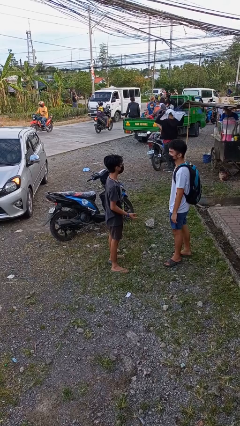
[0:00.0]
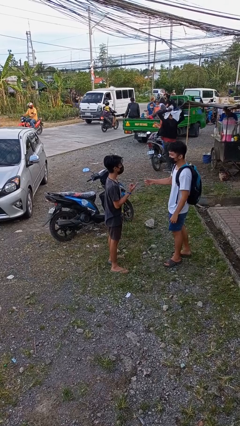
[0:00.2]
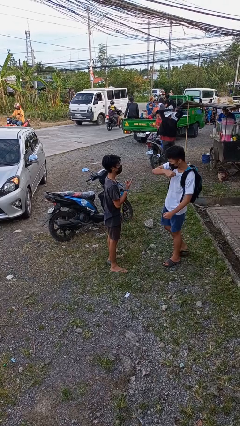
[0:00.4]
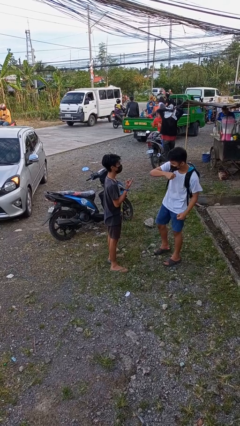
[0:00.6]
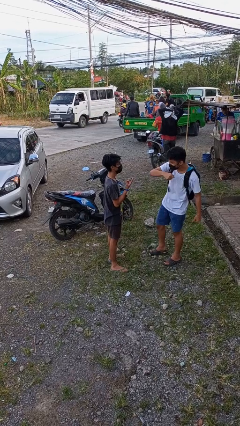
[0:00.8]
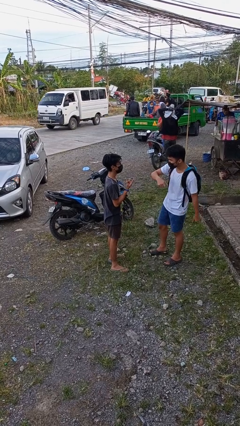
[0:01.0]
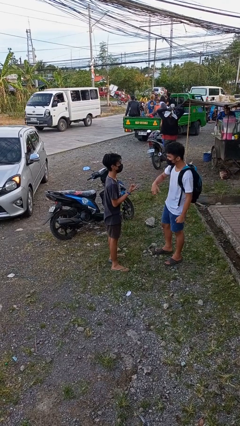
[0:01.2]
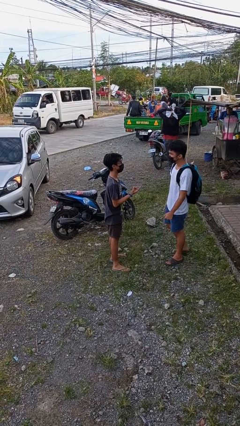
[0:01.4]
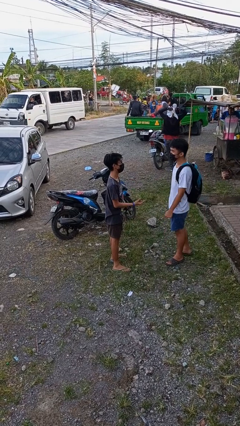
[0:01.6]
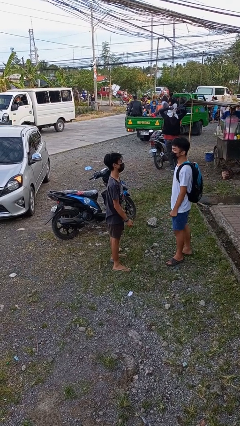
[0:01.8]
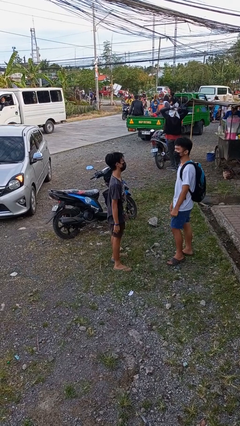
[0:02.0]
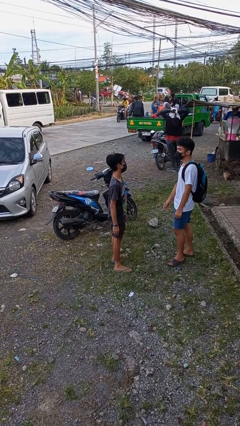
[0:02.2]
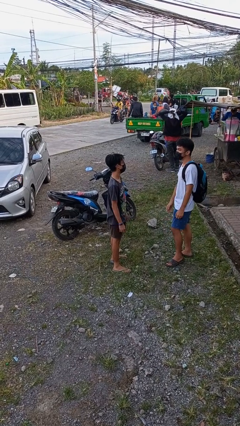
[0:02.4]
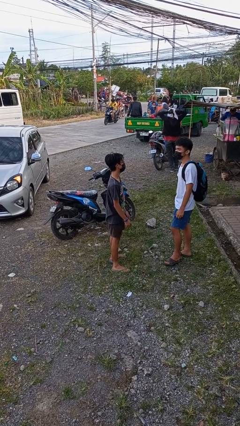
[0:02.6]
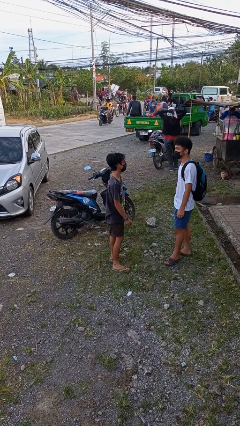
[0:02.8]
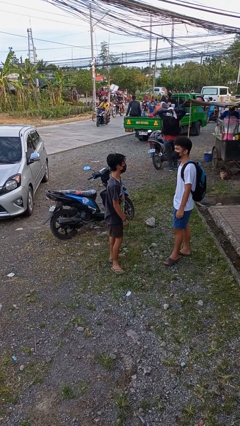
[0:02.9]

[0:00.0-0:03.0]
person talks to person

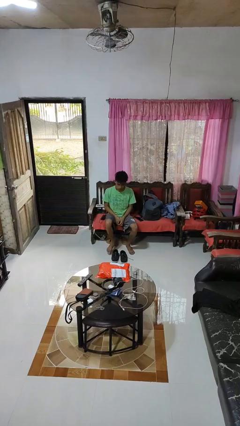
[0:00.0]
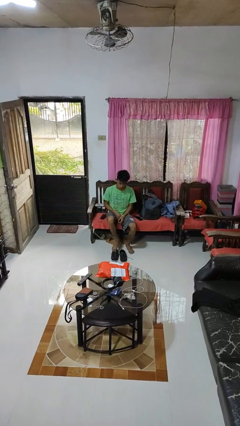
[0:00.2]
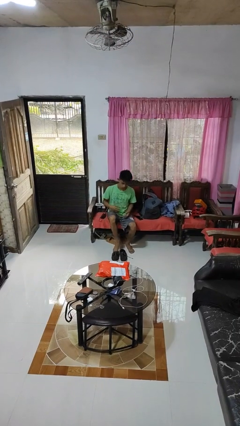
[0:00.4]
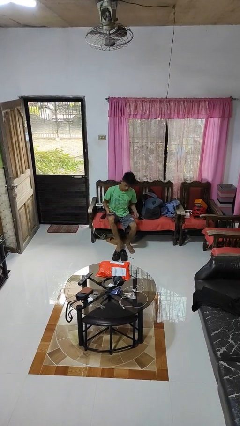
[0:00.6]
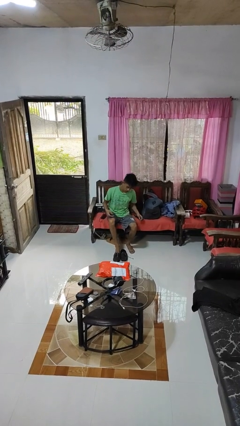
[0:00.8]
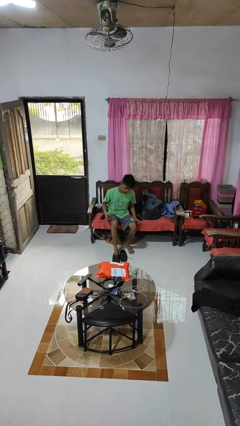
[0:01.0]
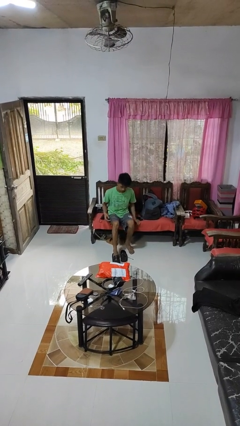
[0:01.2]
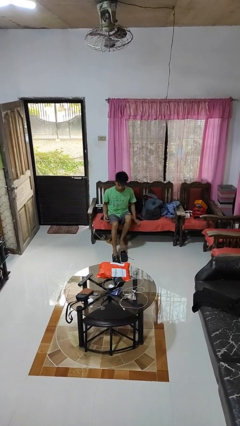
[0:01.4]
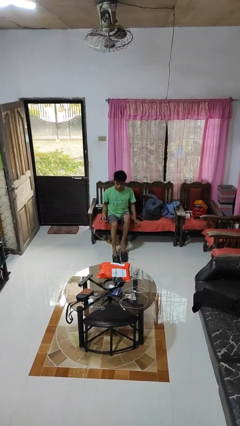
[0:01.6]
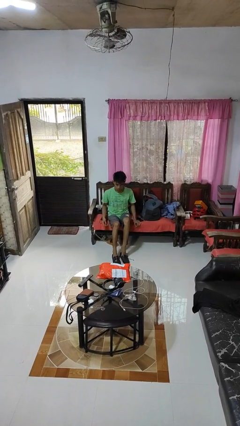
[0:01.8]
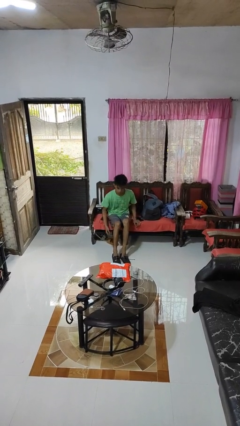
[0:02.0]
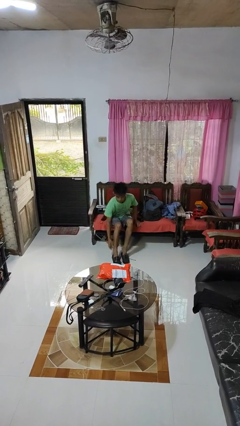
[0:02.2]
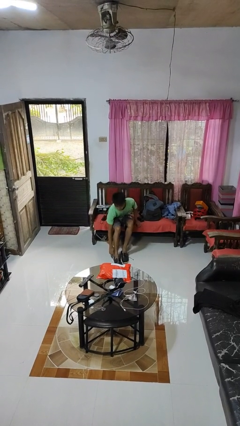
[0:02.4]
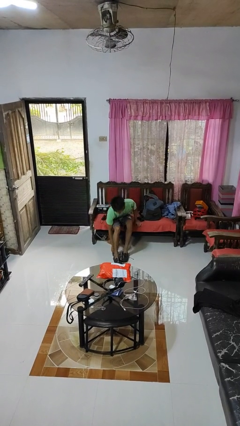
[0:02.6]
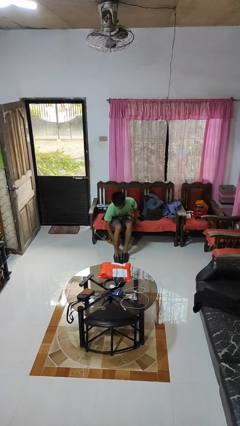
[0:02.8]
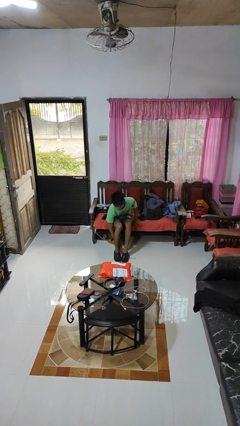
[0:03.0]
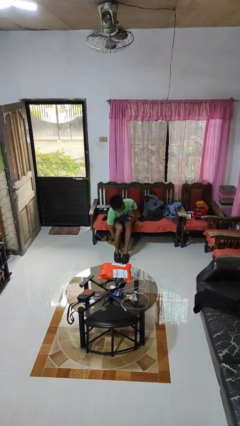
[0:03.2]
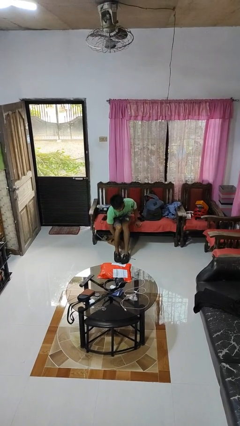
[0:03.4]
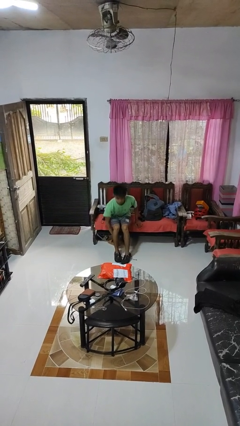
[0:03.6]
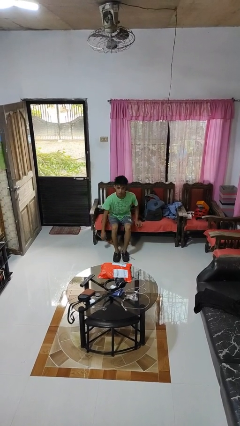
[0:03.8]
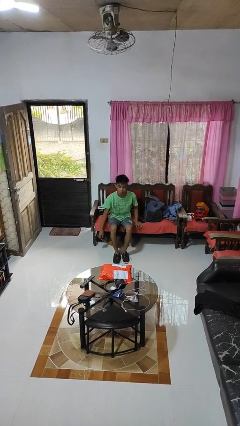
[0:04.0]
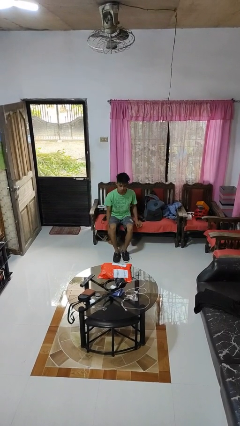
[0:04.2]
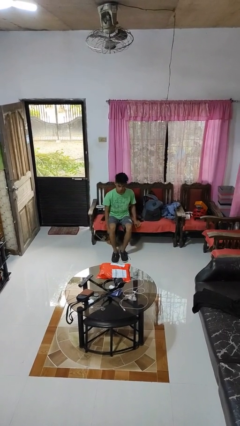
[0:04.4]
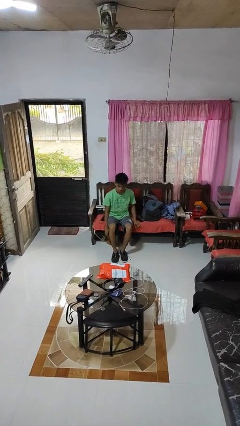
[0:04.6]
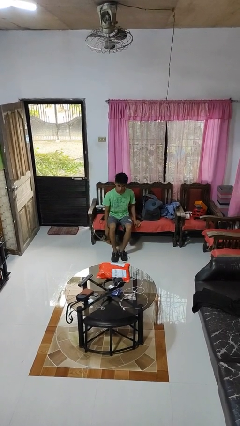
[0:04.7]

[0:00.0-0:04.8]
person puts on shoes

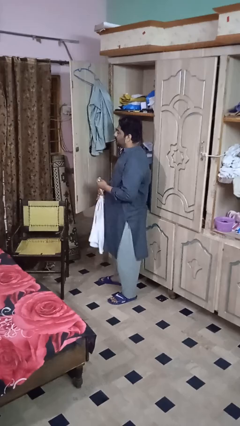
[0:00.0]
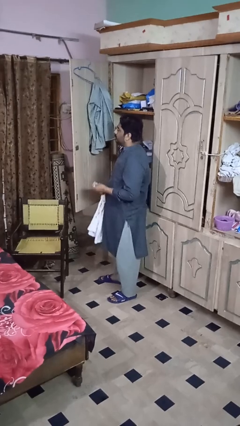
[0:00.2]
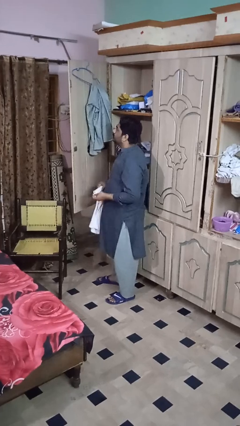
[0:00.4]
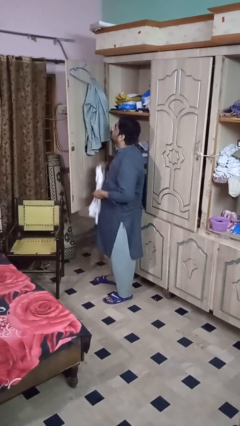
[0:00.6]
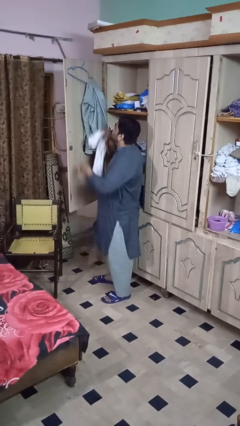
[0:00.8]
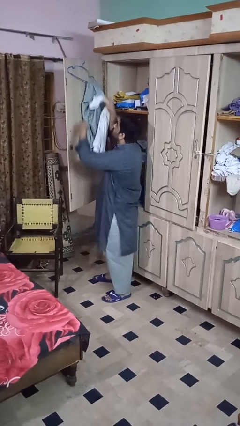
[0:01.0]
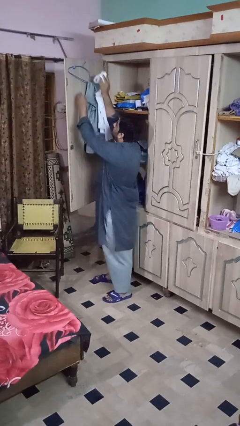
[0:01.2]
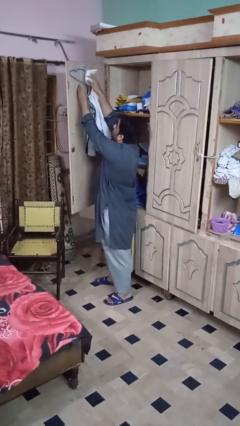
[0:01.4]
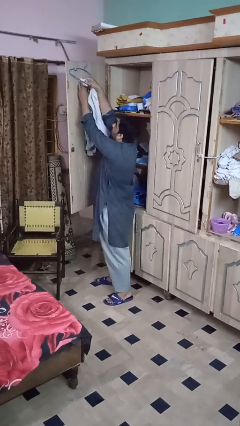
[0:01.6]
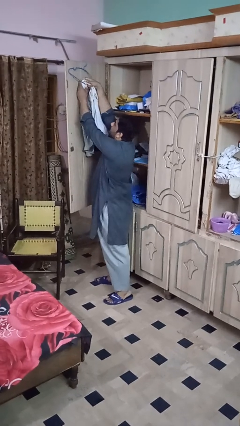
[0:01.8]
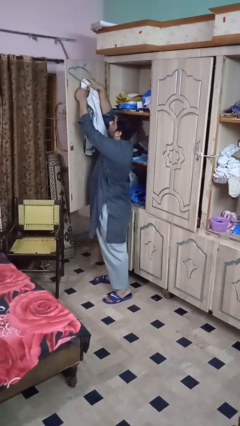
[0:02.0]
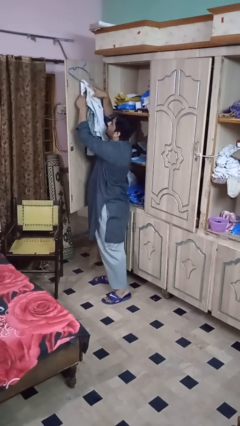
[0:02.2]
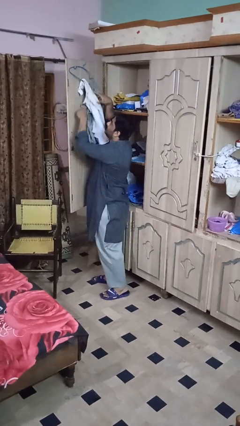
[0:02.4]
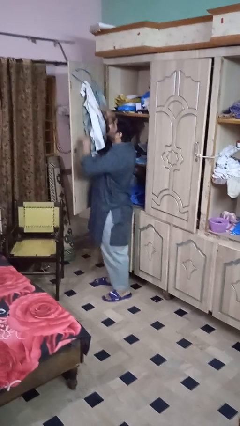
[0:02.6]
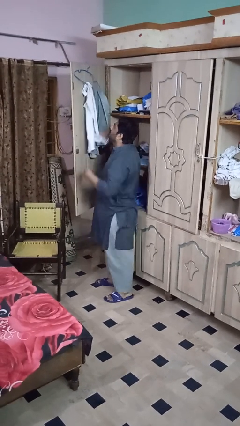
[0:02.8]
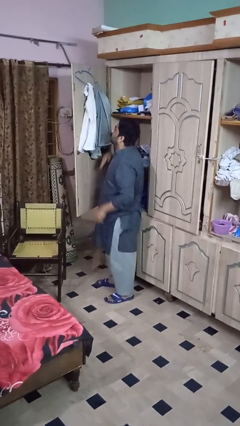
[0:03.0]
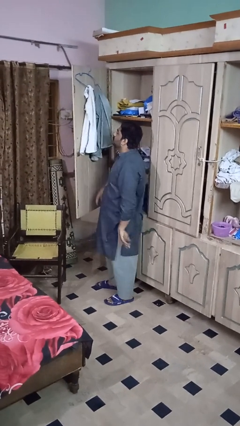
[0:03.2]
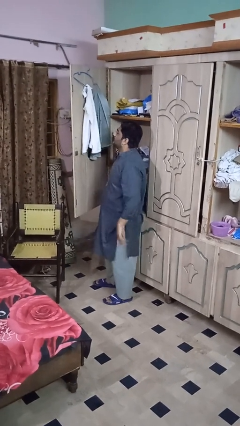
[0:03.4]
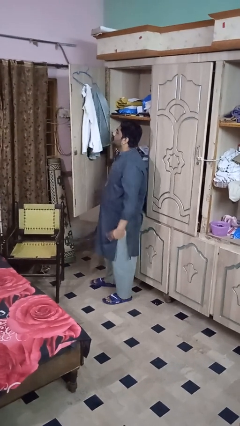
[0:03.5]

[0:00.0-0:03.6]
person puts clothes into closet

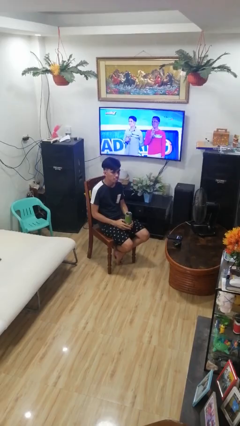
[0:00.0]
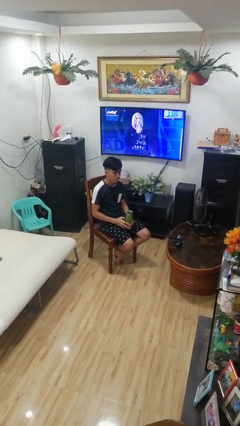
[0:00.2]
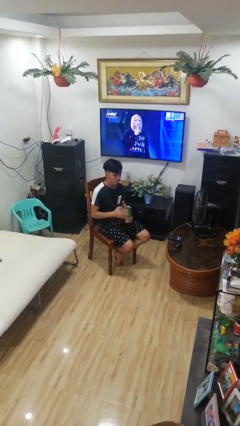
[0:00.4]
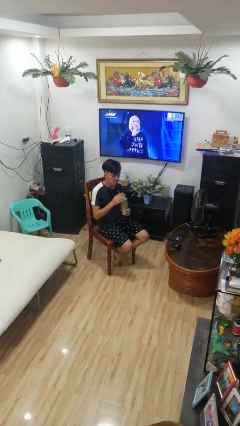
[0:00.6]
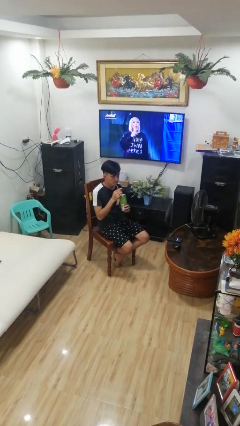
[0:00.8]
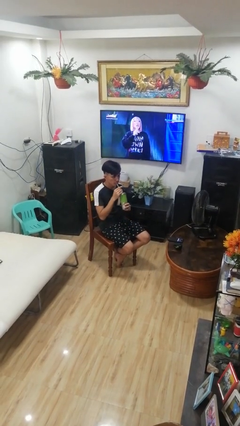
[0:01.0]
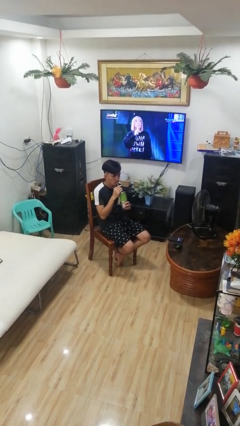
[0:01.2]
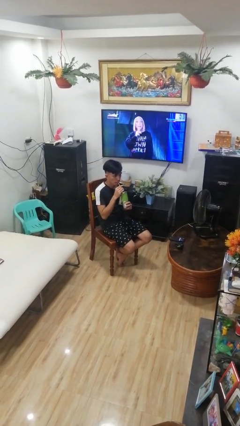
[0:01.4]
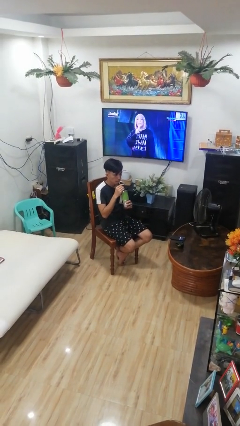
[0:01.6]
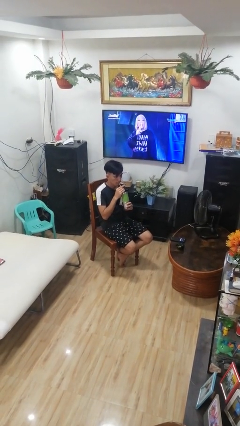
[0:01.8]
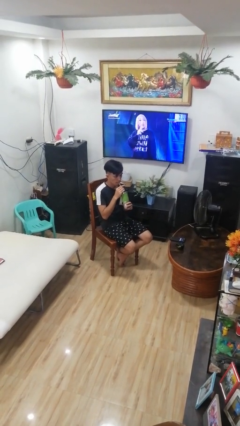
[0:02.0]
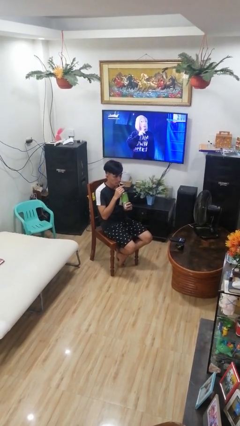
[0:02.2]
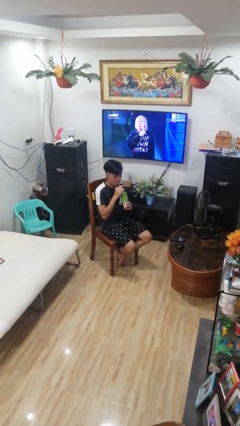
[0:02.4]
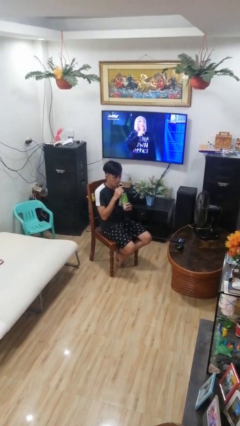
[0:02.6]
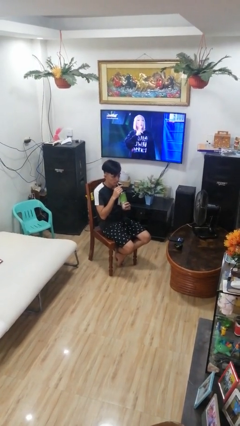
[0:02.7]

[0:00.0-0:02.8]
person drinks from straw

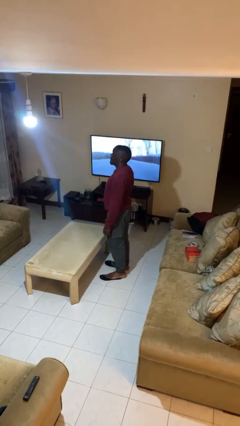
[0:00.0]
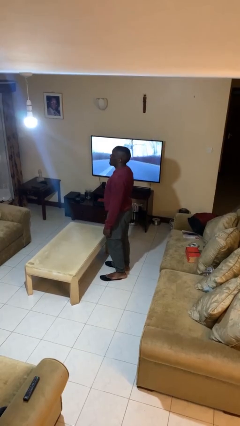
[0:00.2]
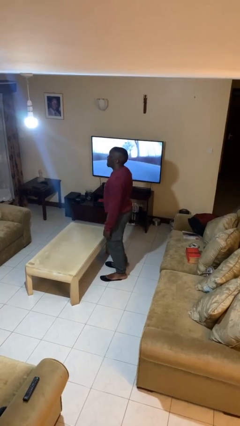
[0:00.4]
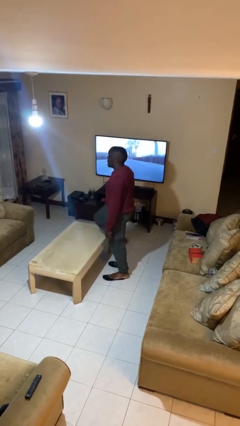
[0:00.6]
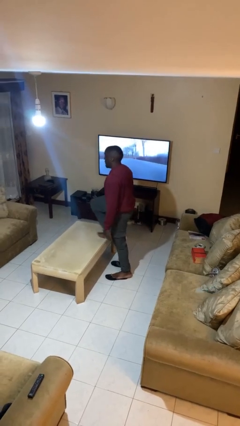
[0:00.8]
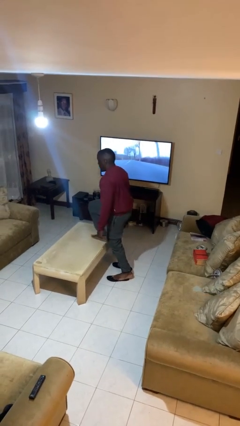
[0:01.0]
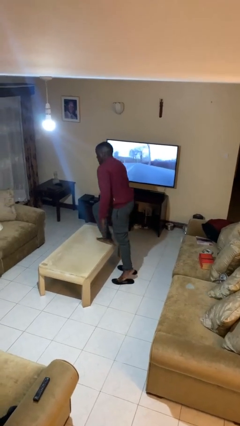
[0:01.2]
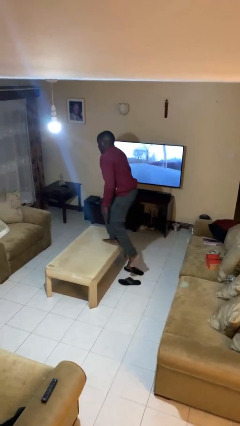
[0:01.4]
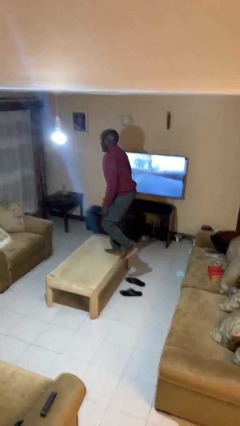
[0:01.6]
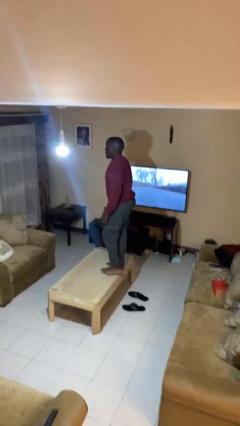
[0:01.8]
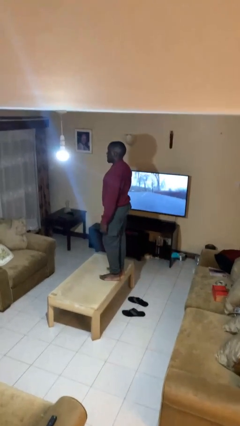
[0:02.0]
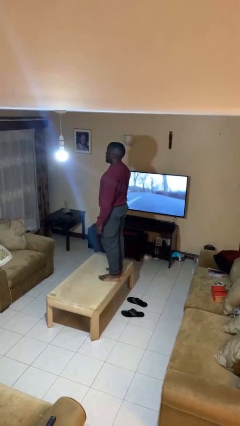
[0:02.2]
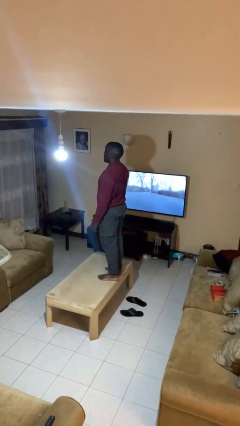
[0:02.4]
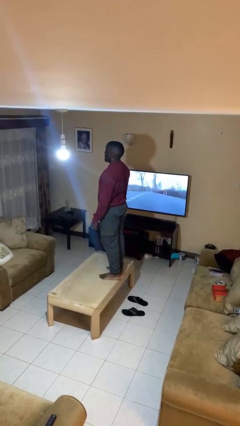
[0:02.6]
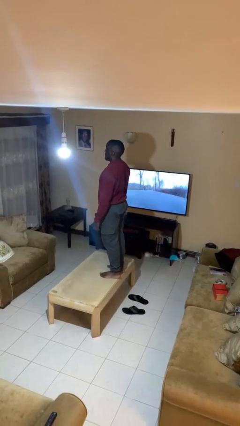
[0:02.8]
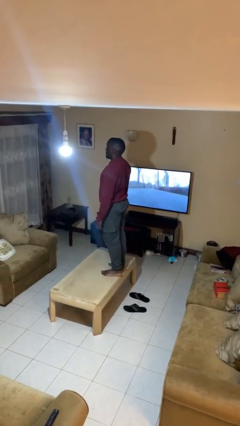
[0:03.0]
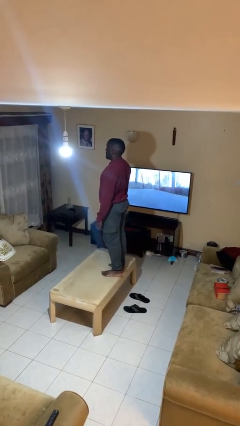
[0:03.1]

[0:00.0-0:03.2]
person climbs on table

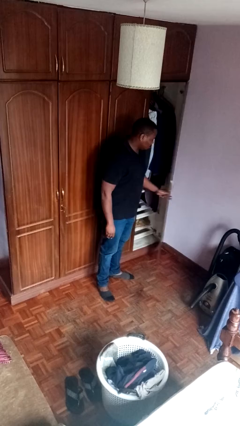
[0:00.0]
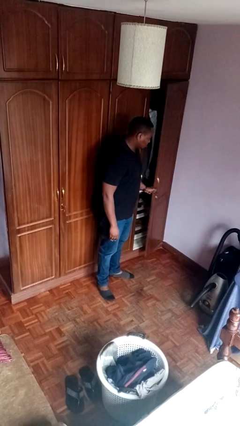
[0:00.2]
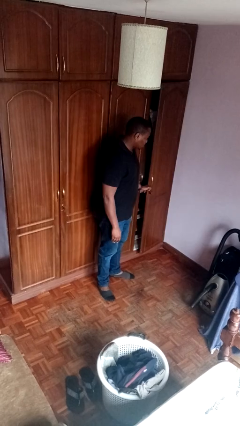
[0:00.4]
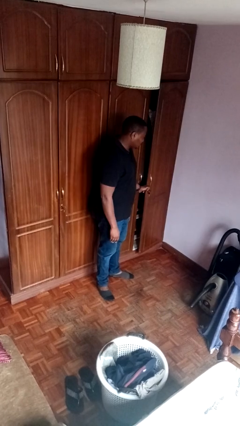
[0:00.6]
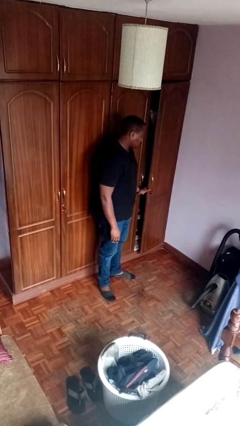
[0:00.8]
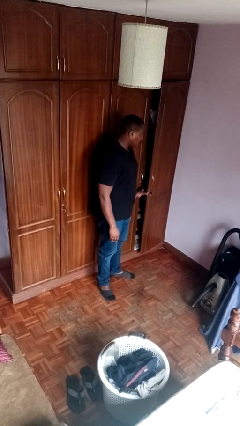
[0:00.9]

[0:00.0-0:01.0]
person closes closet door
